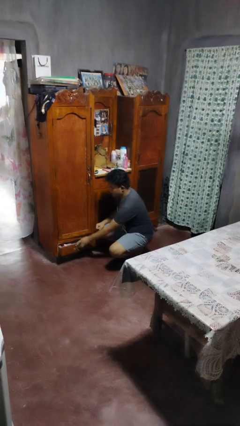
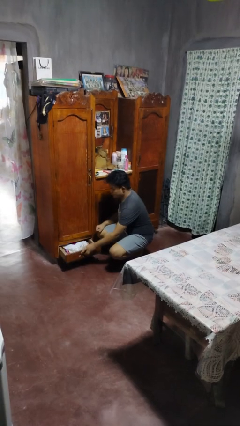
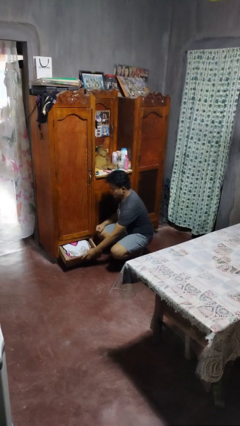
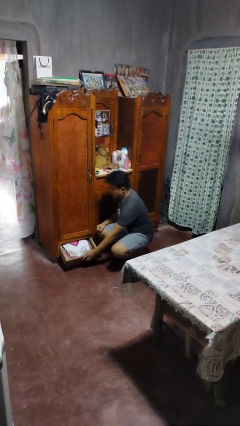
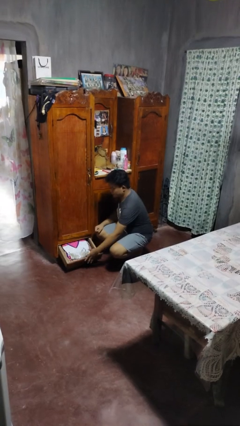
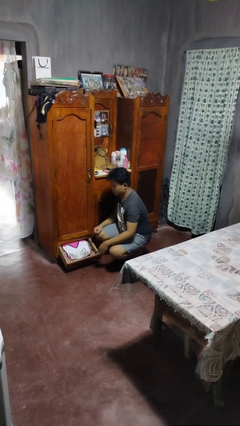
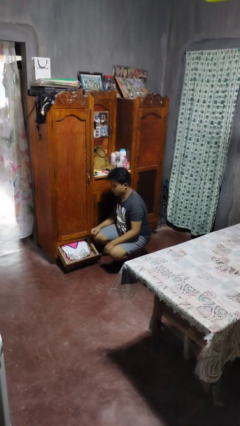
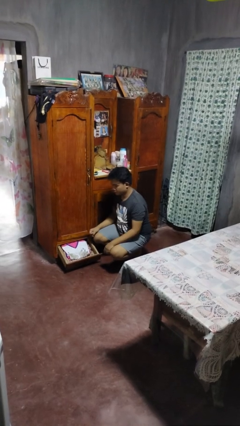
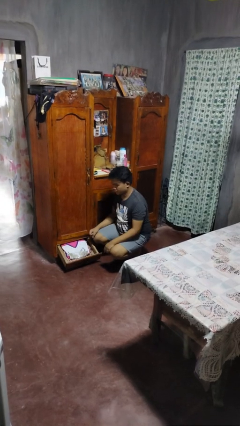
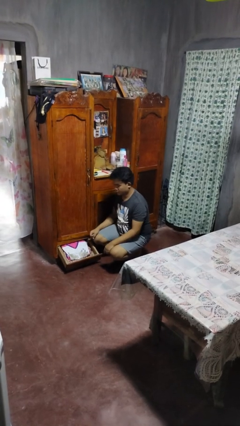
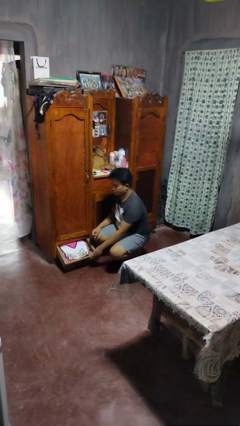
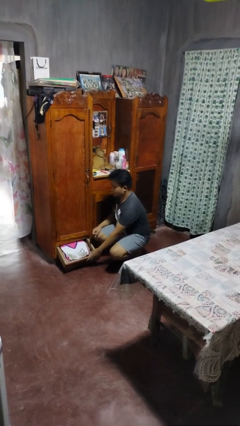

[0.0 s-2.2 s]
person opens dresser drawer

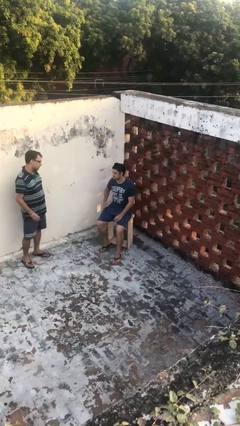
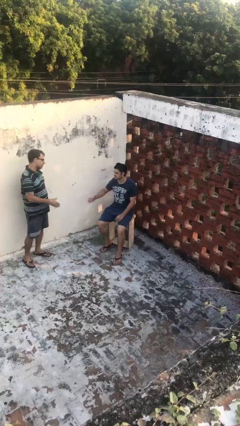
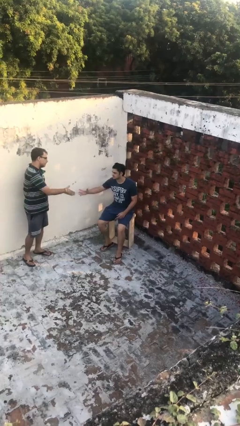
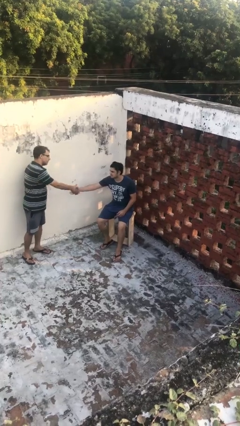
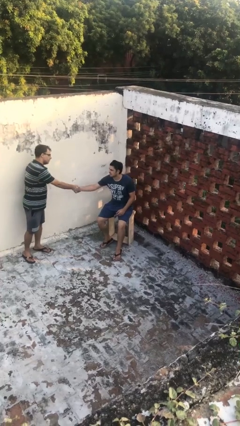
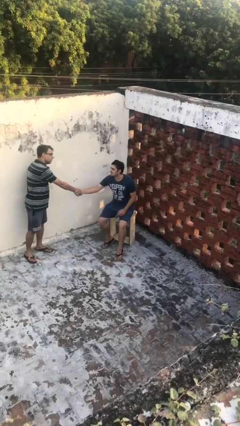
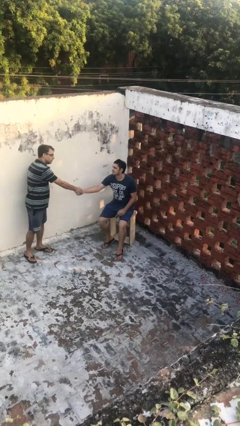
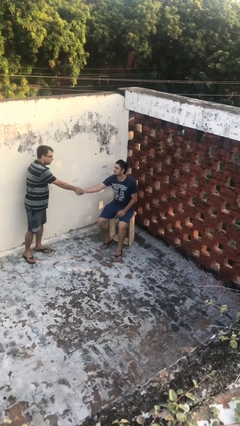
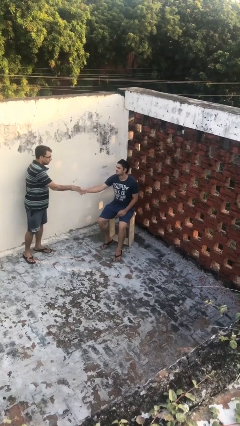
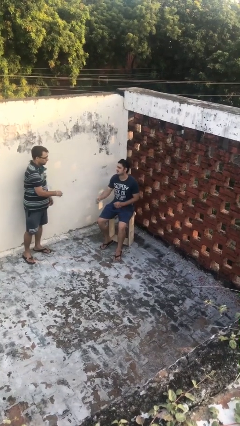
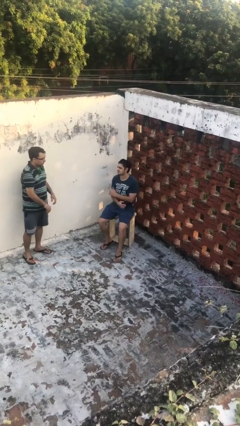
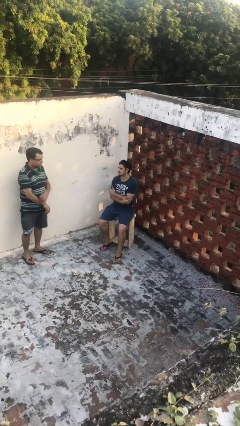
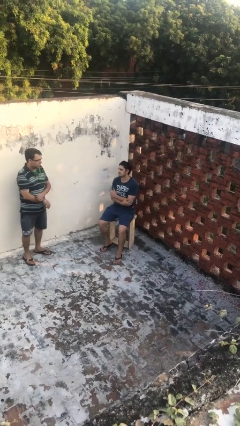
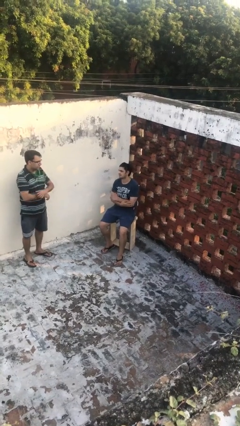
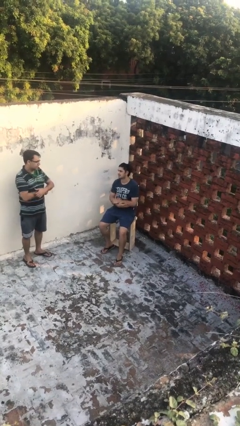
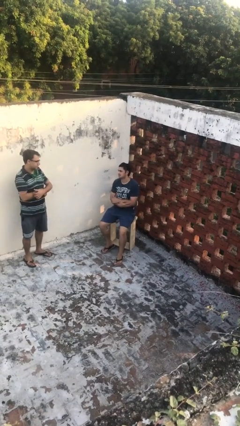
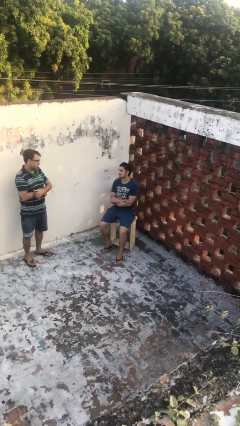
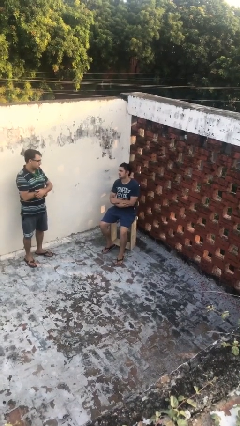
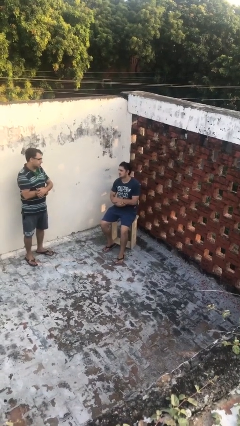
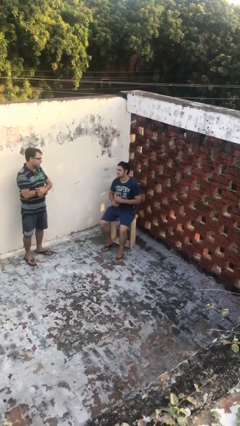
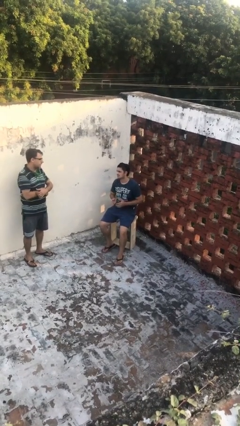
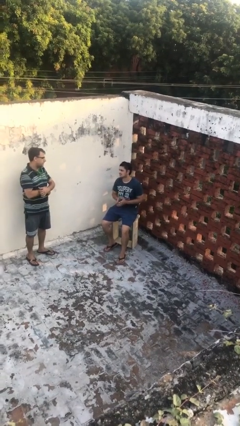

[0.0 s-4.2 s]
person shakes hand

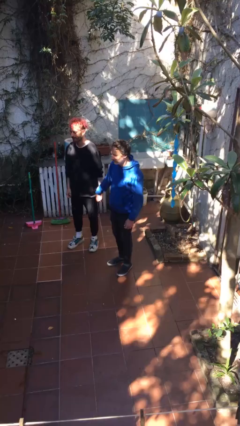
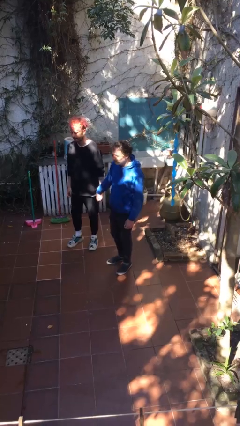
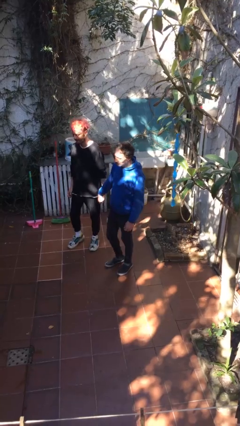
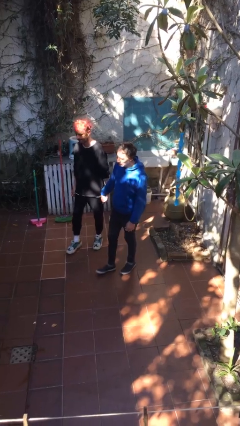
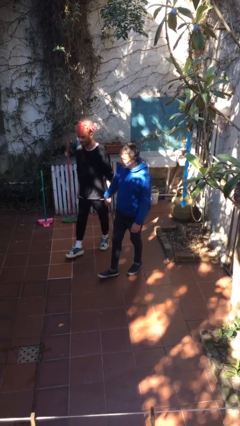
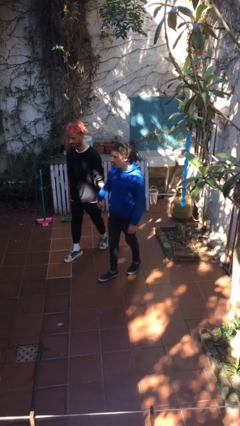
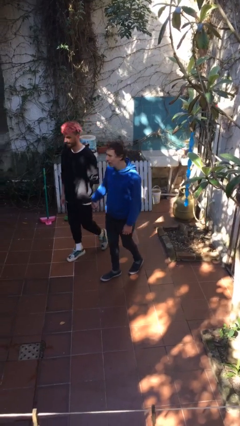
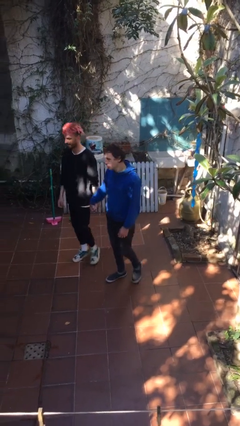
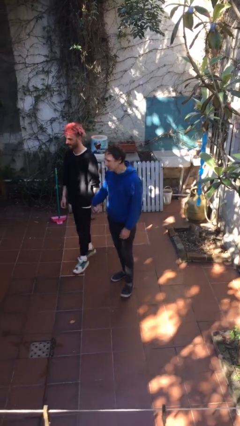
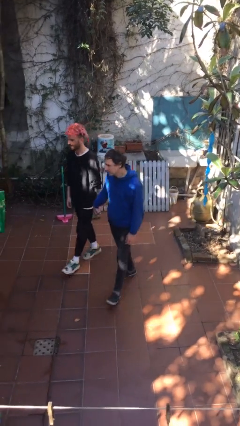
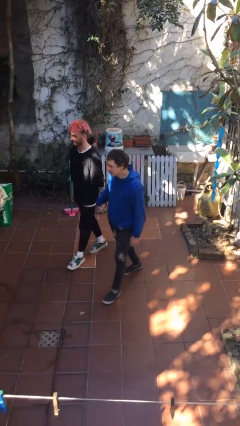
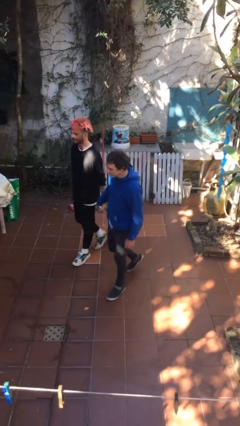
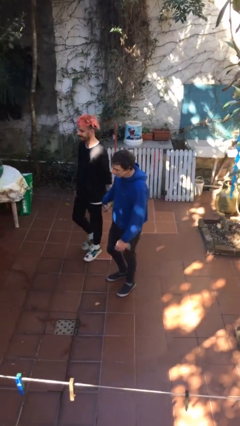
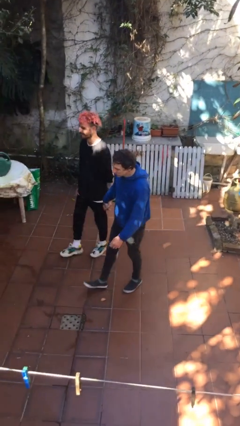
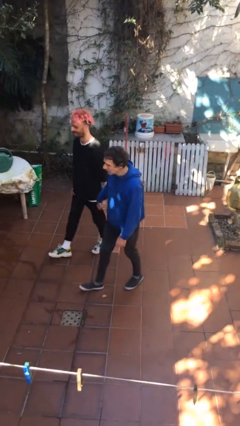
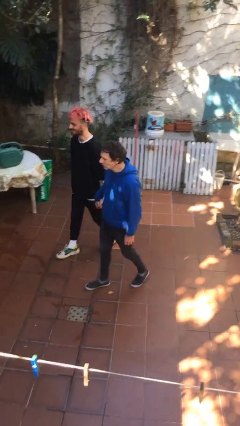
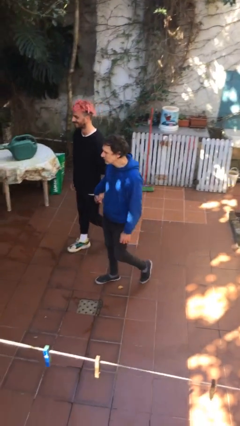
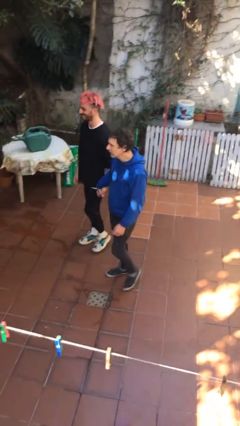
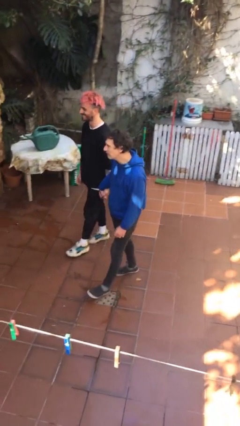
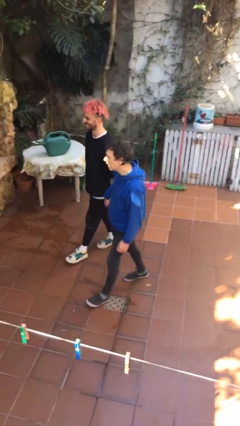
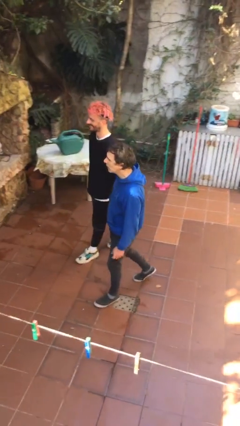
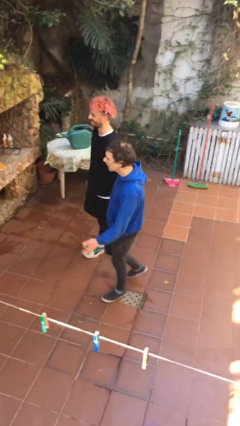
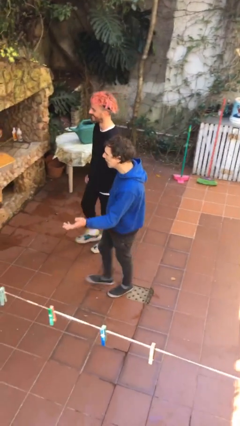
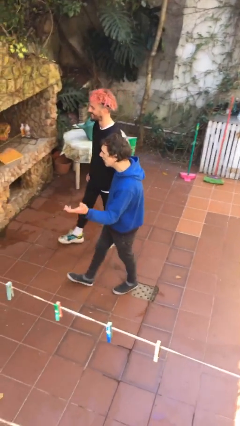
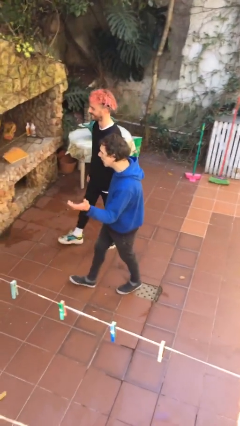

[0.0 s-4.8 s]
person holds hand

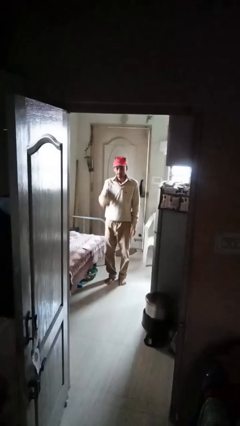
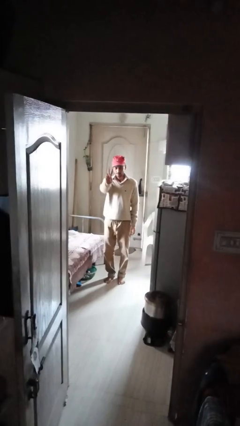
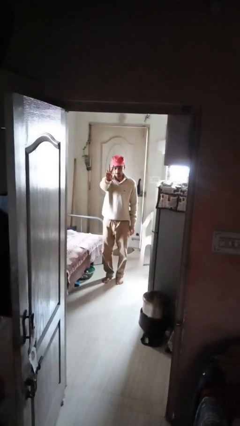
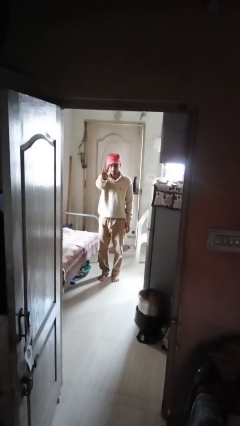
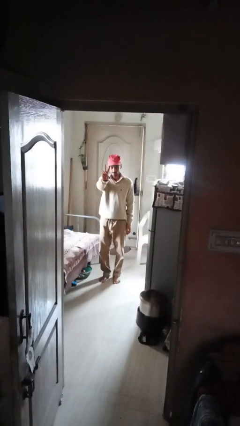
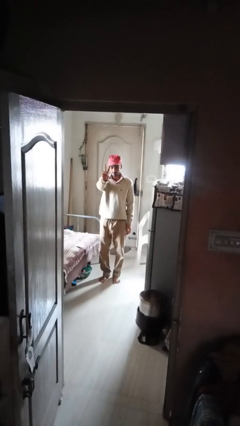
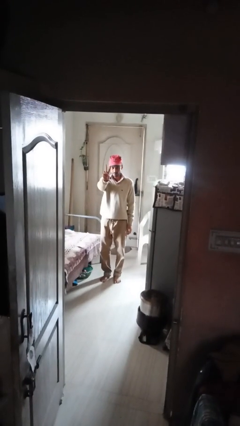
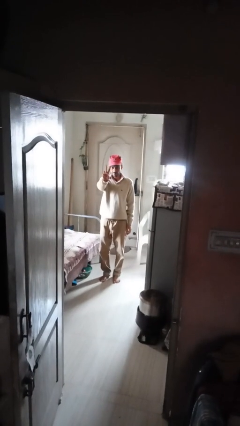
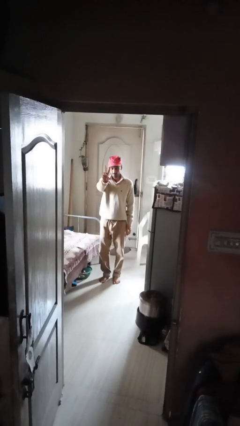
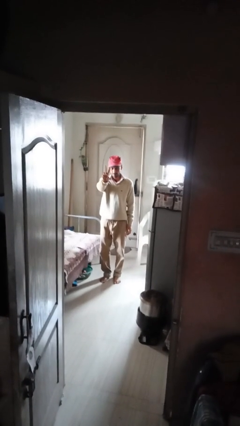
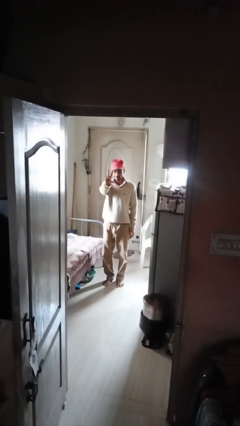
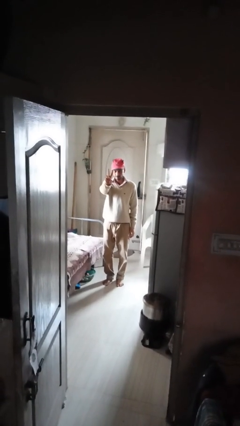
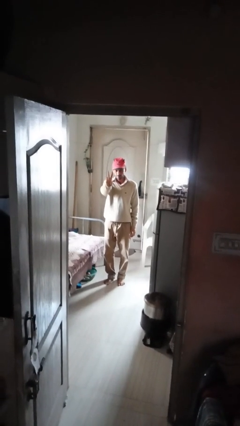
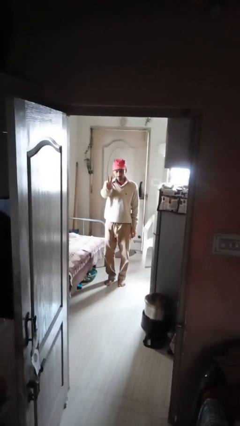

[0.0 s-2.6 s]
person gestures peace

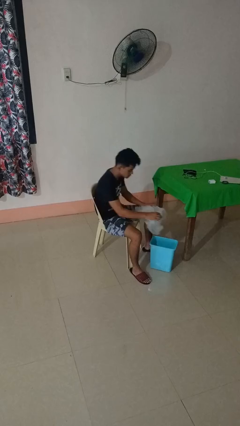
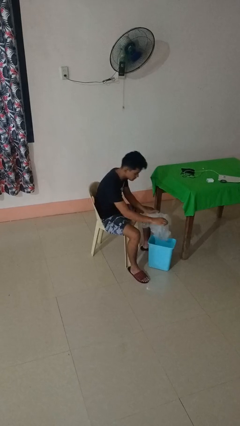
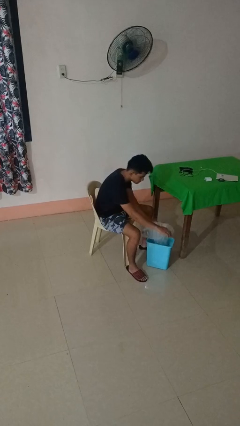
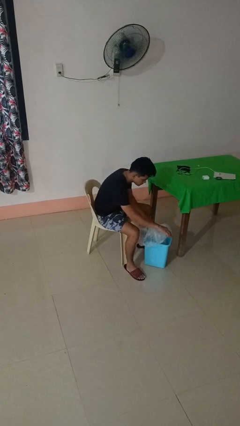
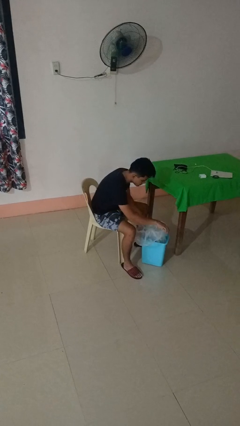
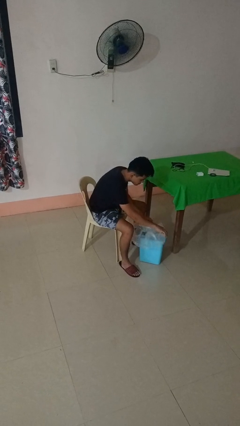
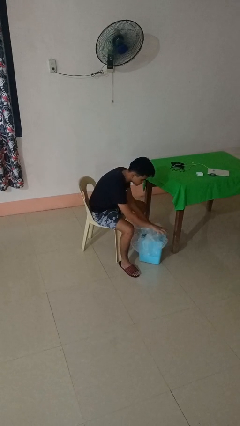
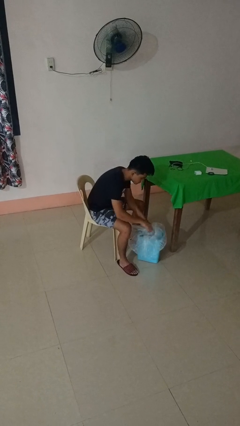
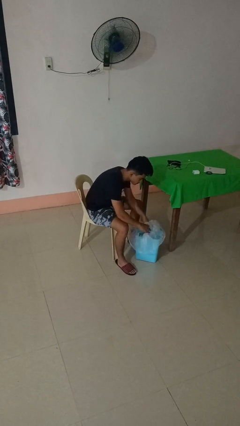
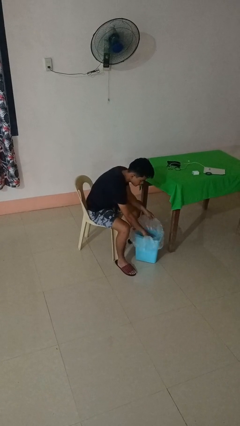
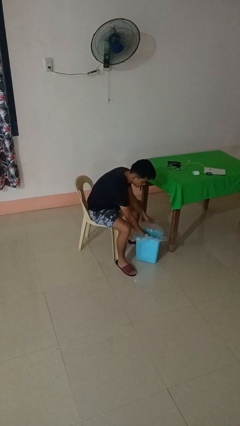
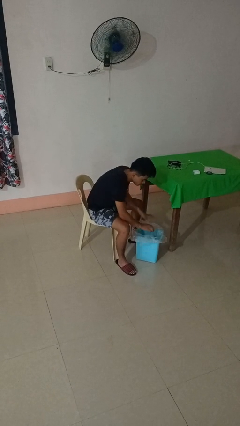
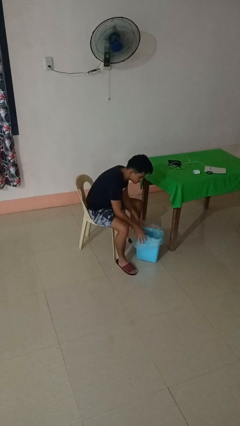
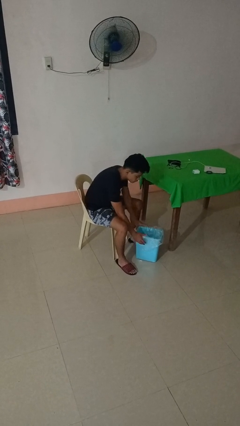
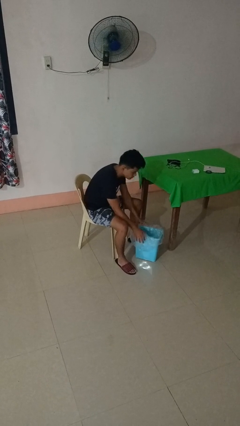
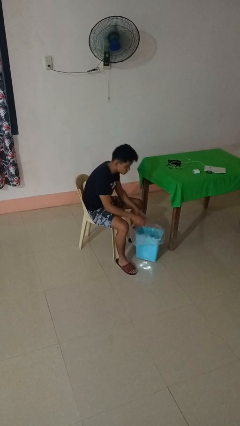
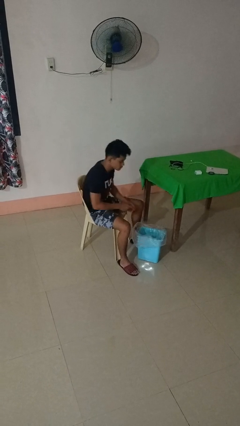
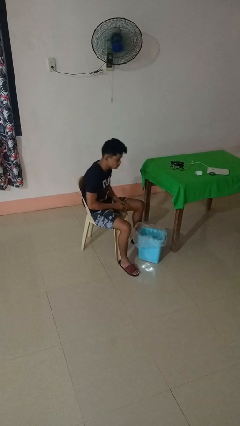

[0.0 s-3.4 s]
person inserts trashbag into trashcan

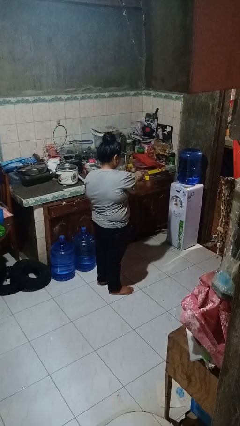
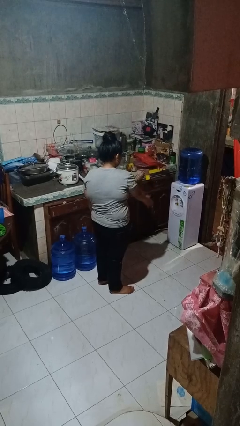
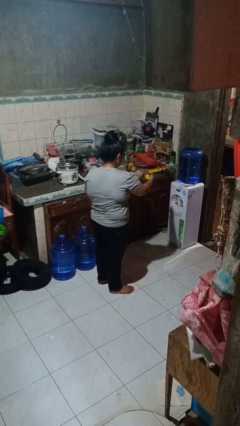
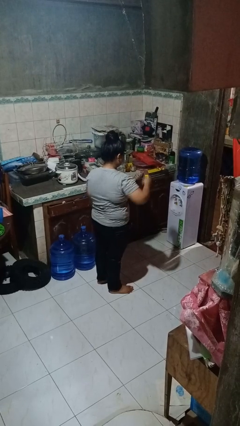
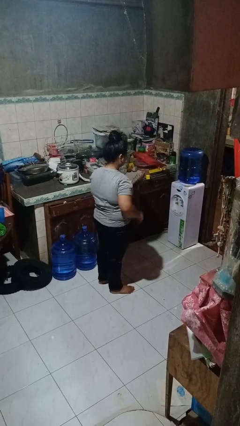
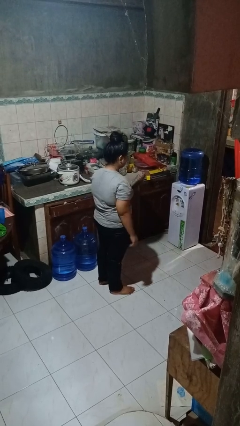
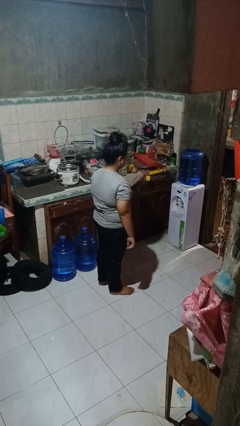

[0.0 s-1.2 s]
person karate chop
